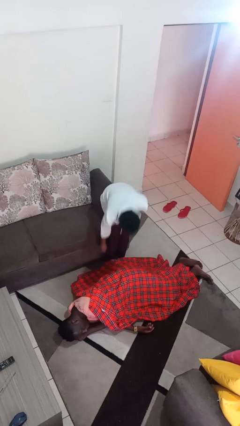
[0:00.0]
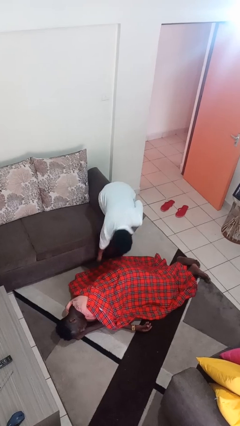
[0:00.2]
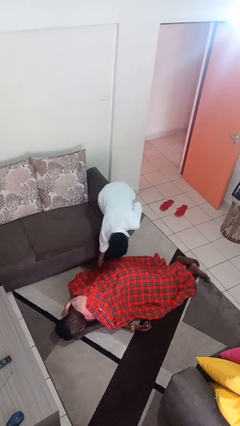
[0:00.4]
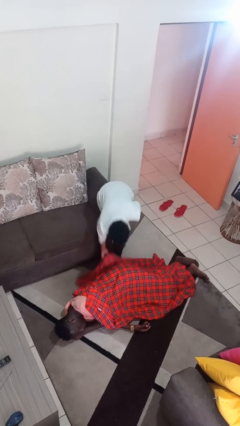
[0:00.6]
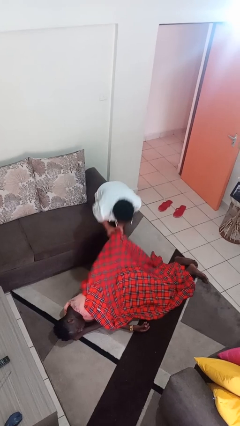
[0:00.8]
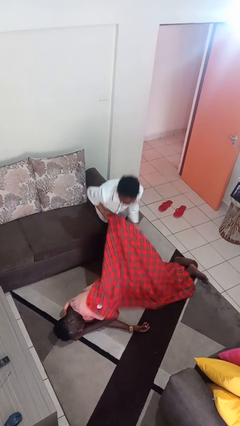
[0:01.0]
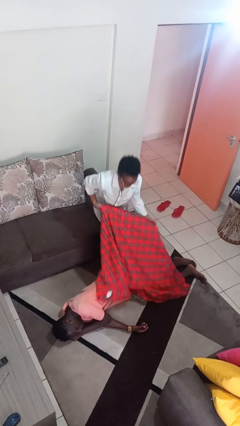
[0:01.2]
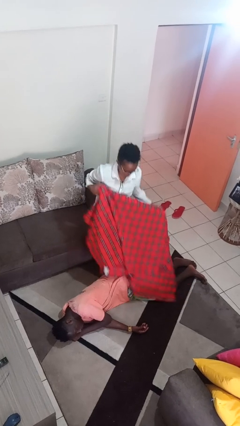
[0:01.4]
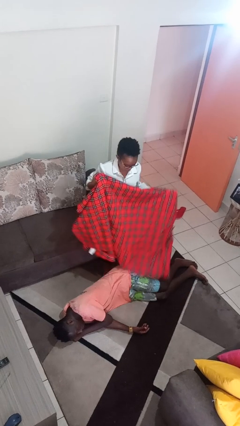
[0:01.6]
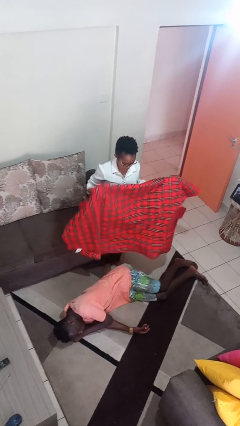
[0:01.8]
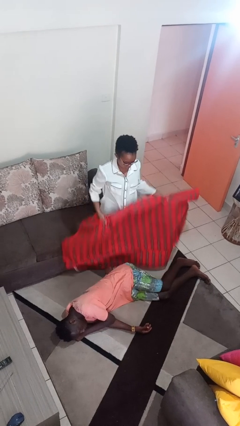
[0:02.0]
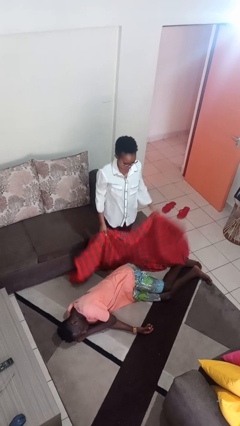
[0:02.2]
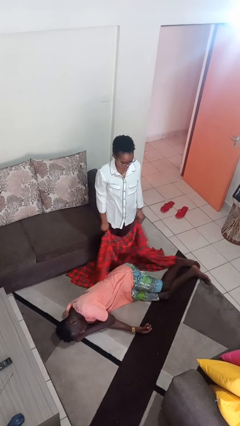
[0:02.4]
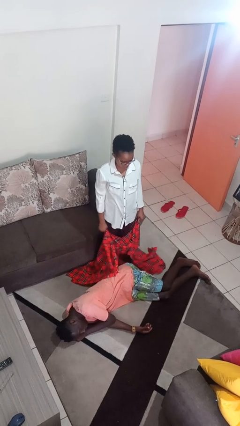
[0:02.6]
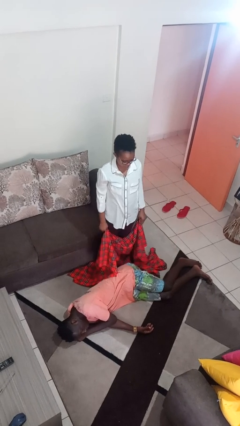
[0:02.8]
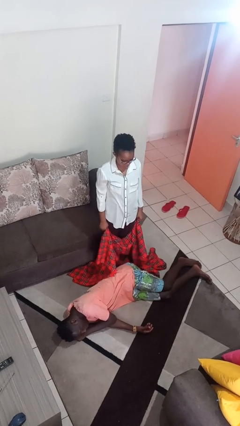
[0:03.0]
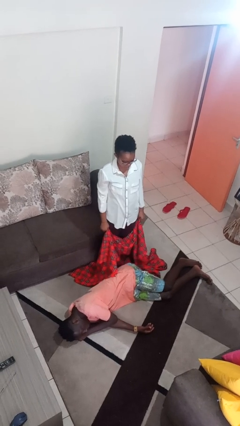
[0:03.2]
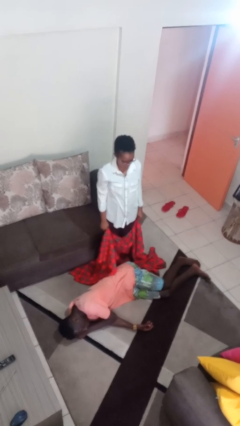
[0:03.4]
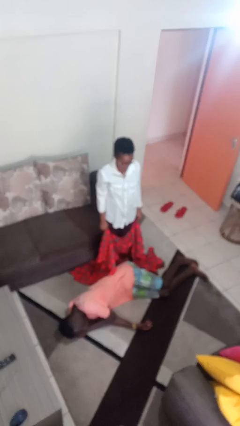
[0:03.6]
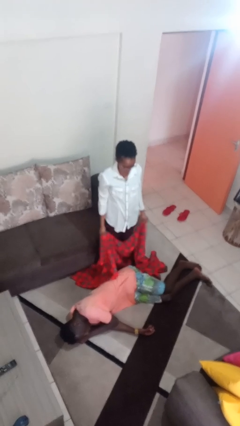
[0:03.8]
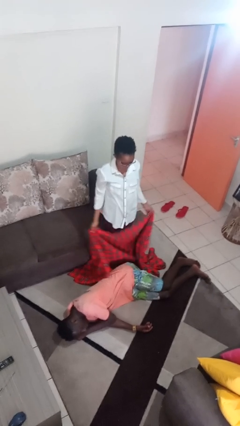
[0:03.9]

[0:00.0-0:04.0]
person uncovers friend with blanket

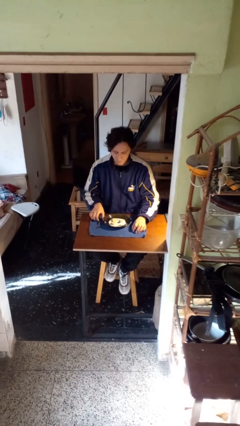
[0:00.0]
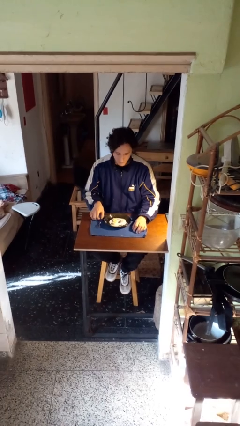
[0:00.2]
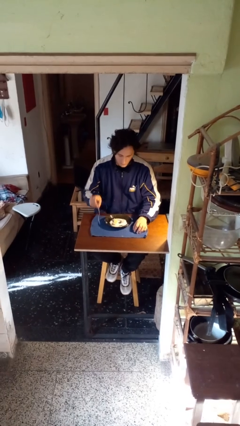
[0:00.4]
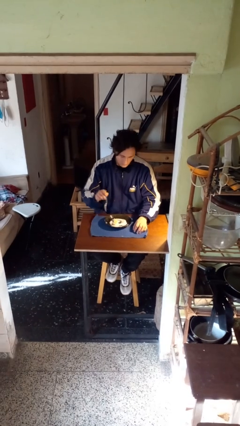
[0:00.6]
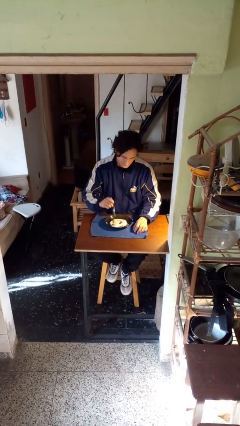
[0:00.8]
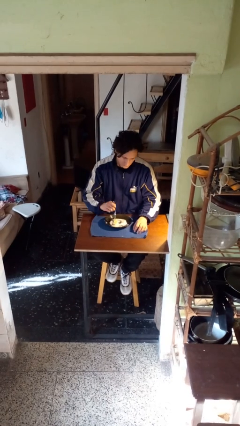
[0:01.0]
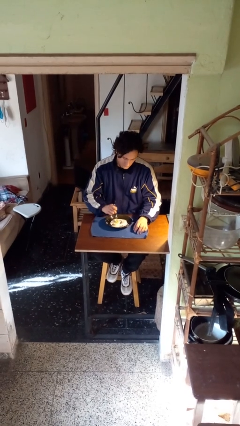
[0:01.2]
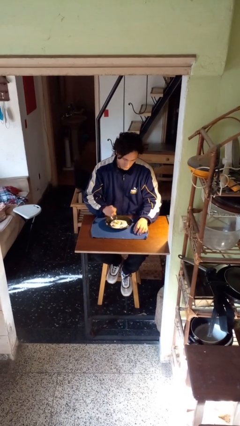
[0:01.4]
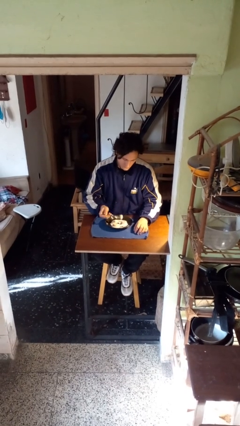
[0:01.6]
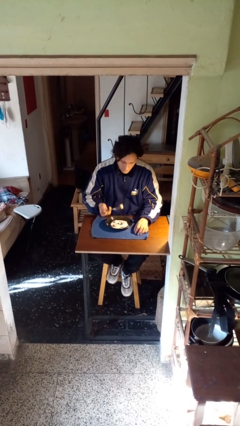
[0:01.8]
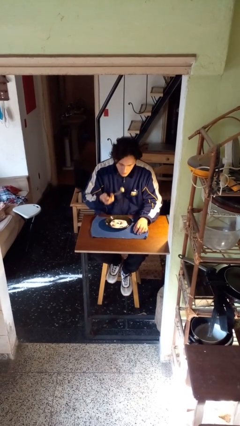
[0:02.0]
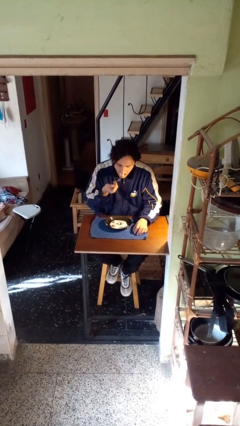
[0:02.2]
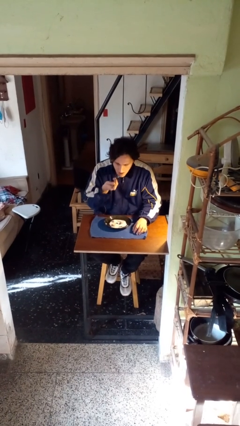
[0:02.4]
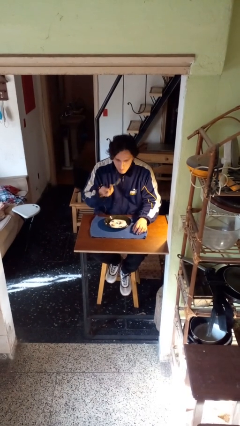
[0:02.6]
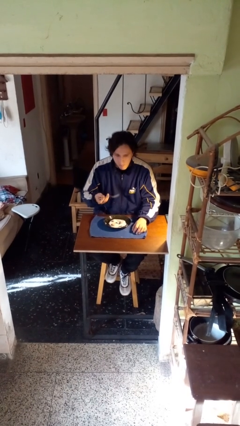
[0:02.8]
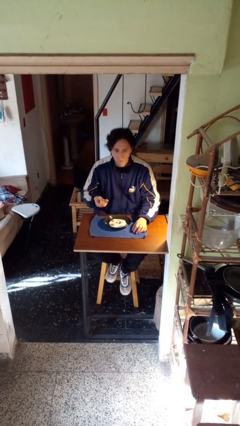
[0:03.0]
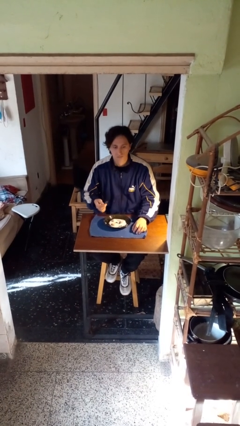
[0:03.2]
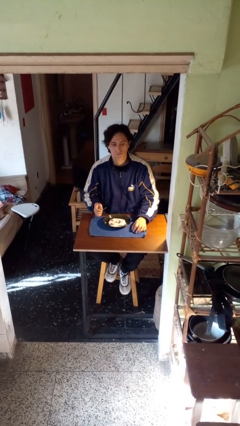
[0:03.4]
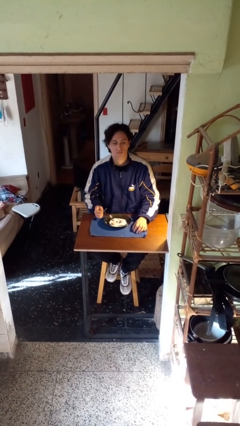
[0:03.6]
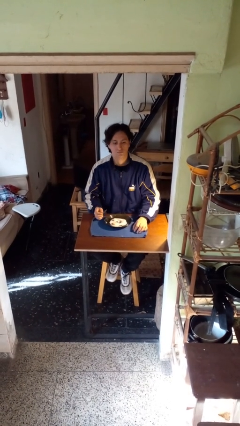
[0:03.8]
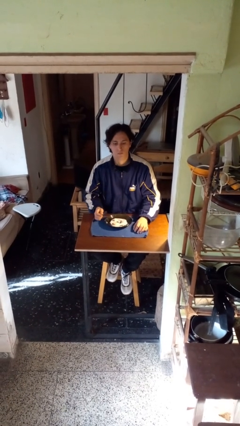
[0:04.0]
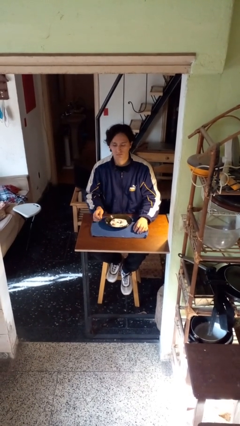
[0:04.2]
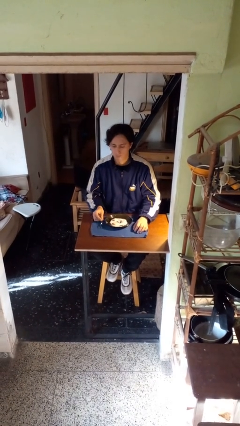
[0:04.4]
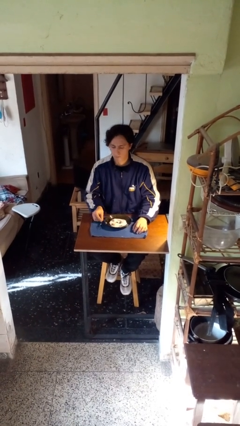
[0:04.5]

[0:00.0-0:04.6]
person eats with utensil

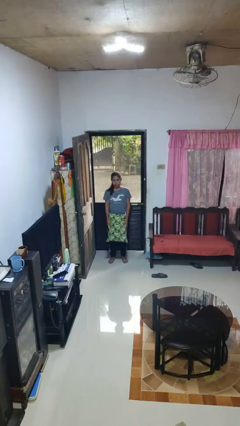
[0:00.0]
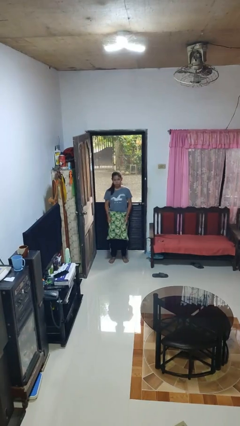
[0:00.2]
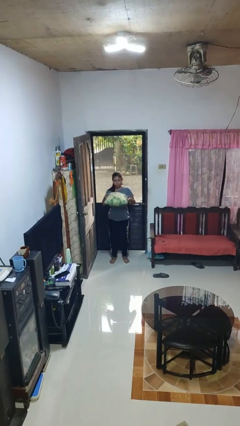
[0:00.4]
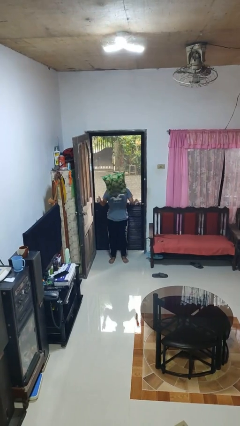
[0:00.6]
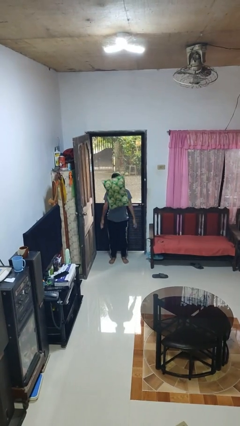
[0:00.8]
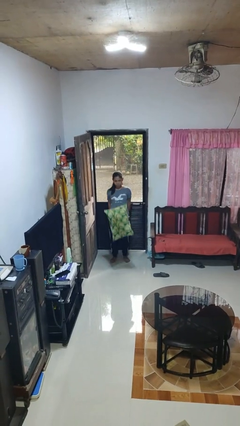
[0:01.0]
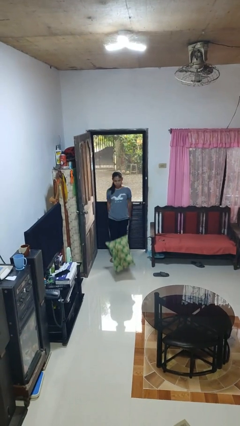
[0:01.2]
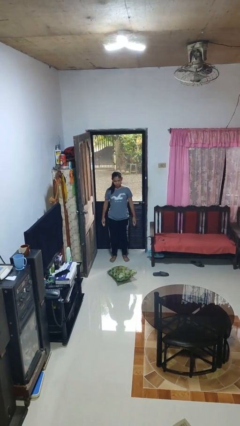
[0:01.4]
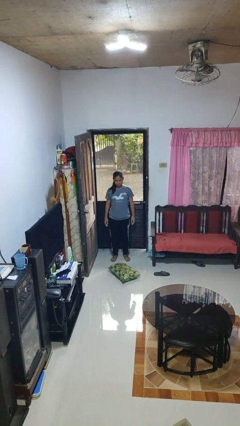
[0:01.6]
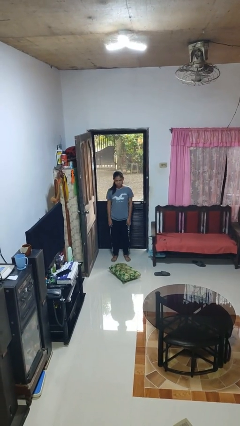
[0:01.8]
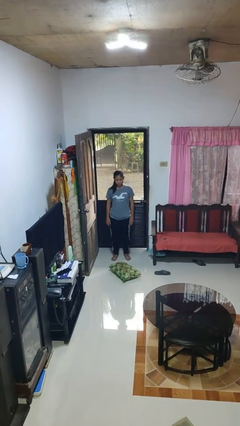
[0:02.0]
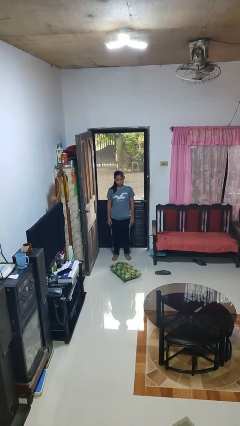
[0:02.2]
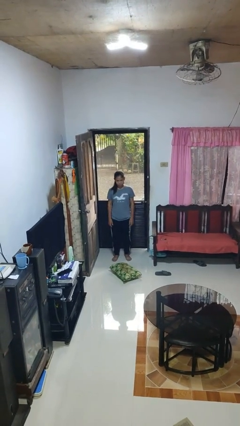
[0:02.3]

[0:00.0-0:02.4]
person throws object into air

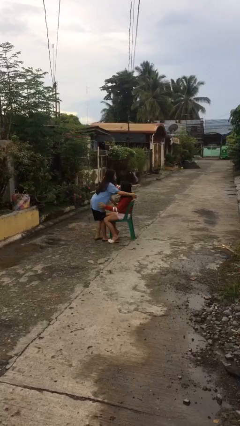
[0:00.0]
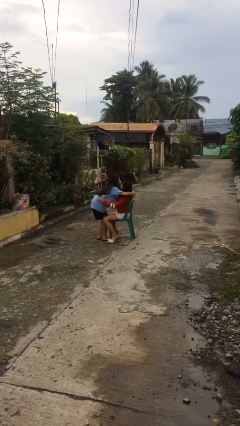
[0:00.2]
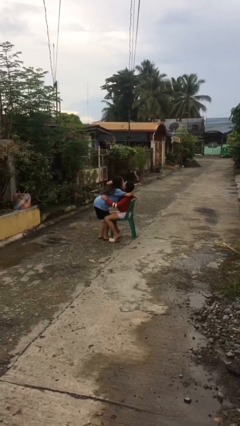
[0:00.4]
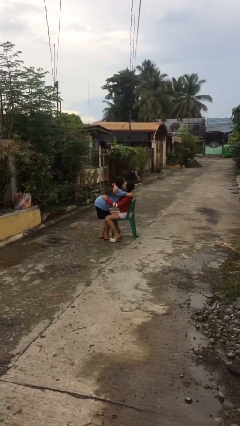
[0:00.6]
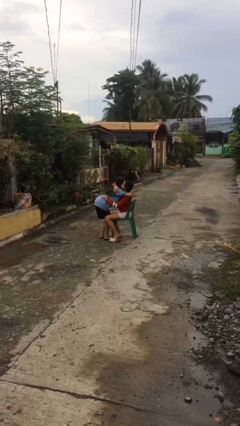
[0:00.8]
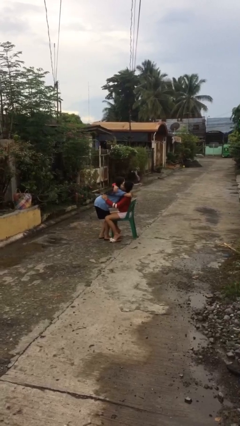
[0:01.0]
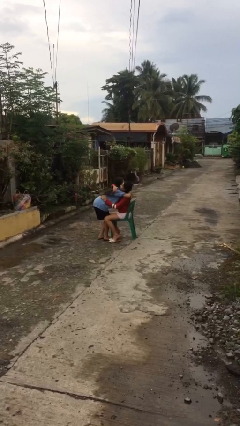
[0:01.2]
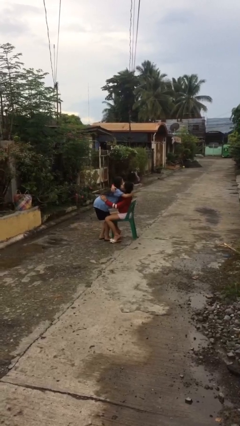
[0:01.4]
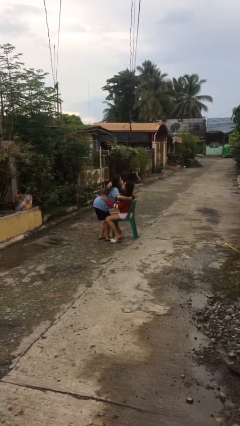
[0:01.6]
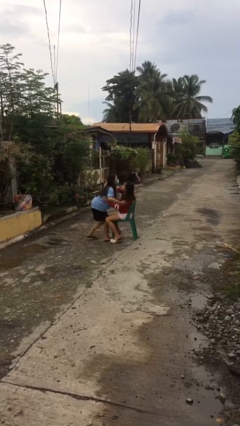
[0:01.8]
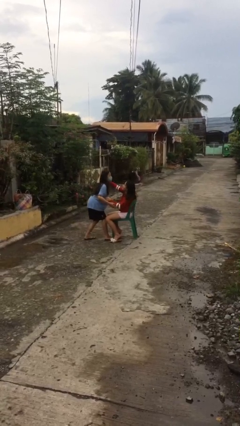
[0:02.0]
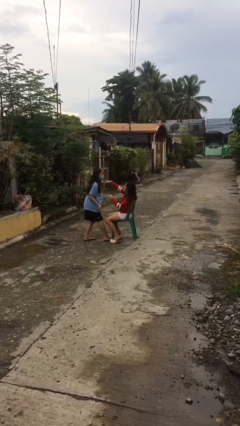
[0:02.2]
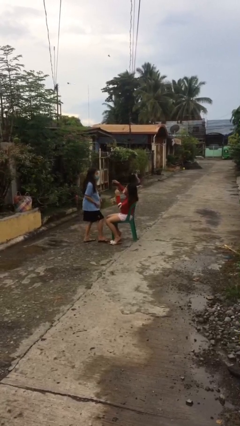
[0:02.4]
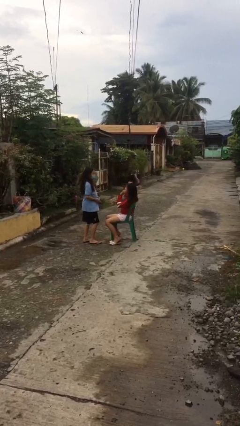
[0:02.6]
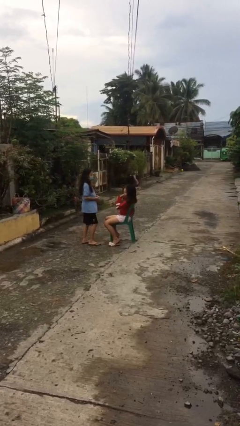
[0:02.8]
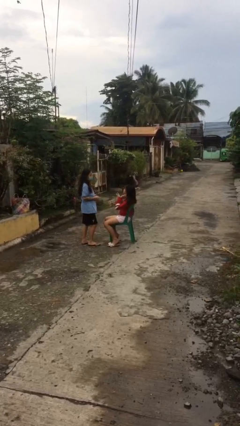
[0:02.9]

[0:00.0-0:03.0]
person embraces person

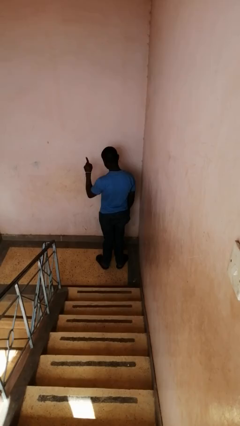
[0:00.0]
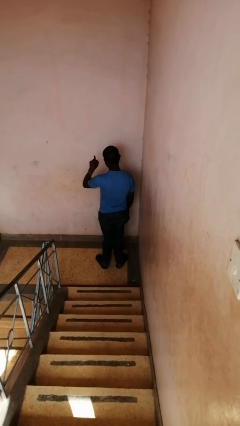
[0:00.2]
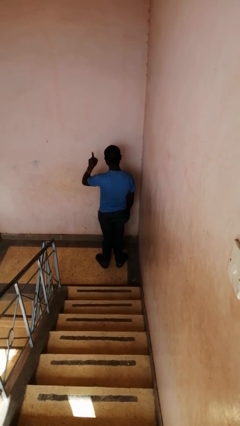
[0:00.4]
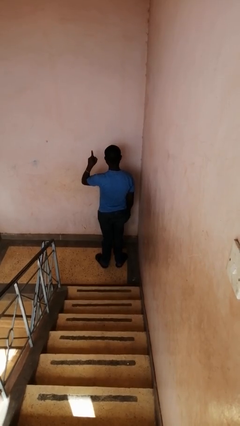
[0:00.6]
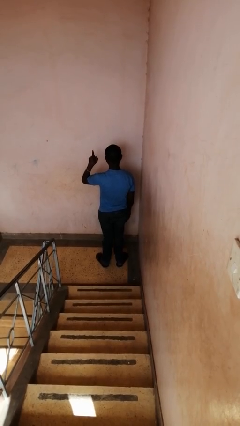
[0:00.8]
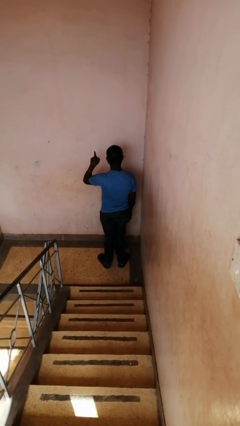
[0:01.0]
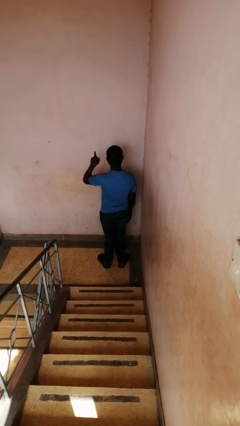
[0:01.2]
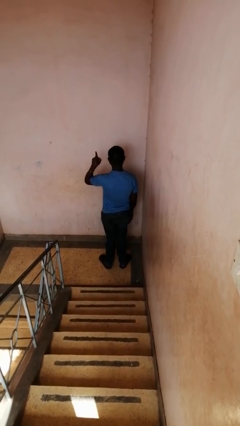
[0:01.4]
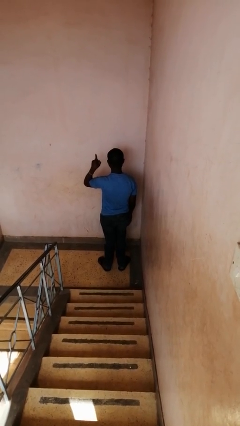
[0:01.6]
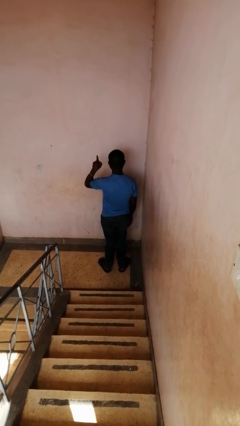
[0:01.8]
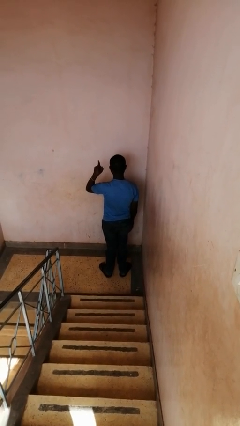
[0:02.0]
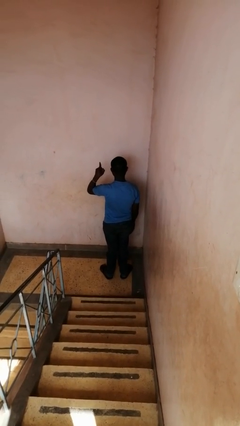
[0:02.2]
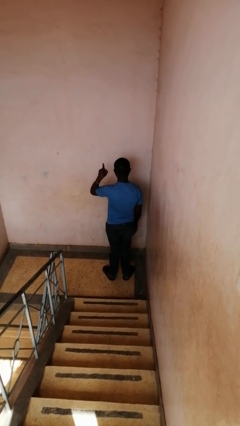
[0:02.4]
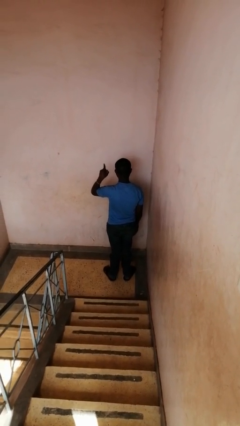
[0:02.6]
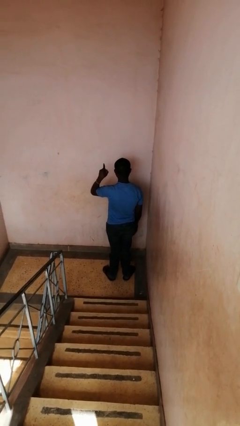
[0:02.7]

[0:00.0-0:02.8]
person gestures number one

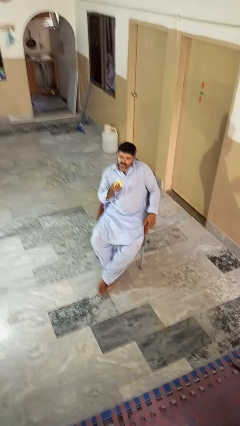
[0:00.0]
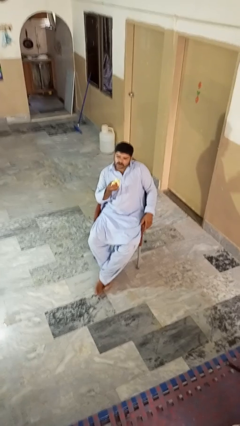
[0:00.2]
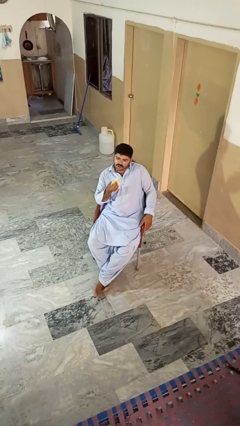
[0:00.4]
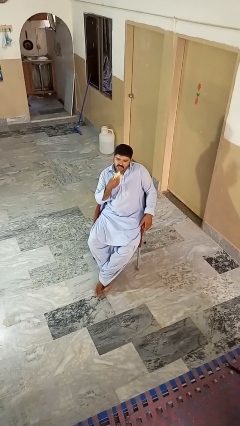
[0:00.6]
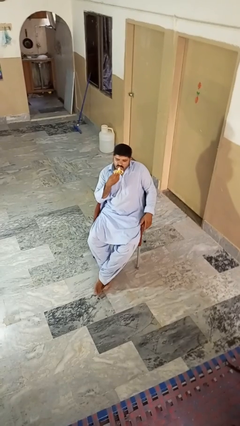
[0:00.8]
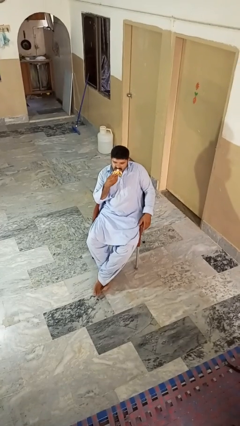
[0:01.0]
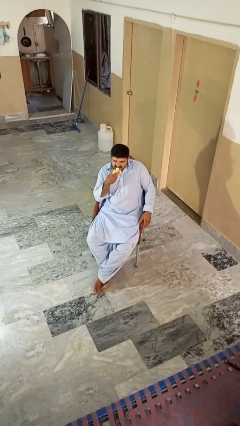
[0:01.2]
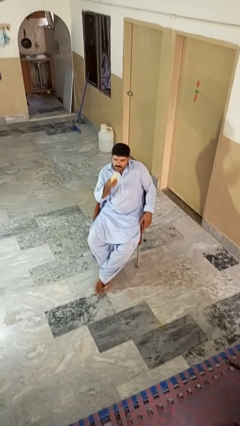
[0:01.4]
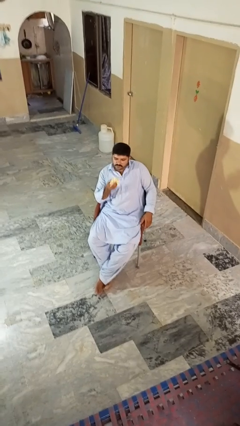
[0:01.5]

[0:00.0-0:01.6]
person eats banana
